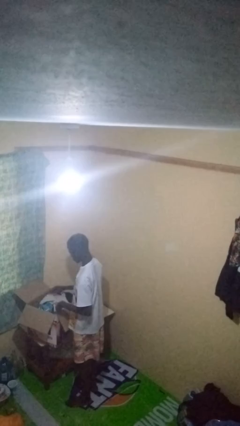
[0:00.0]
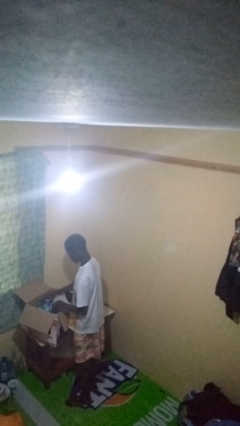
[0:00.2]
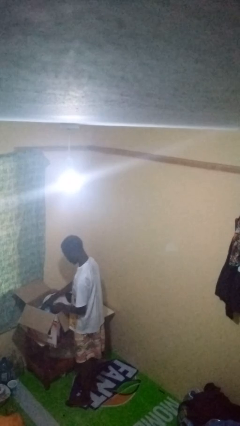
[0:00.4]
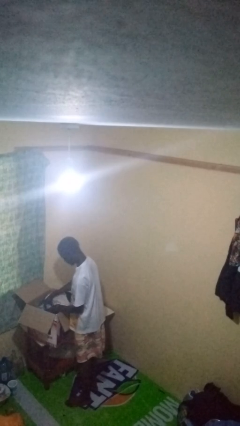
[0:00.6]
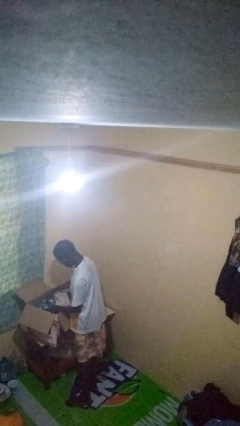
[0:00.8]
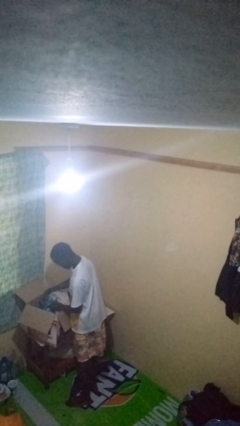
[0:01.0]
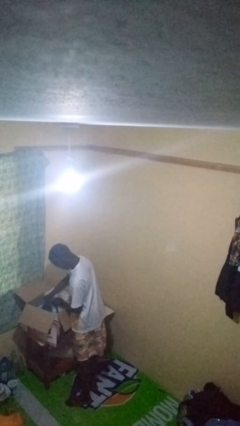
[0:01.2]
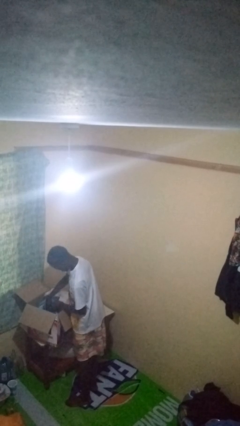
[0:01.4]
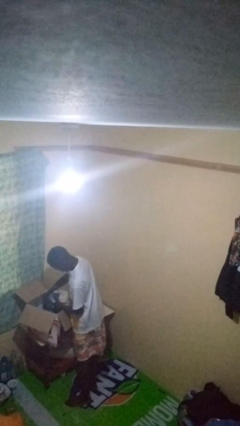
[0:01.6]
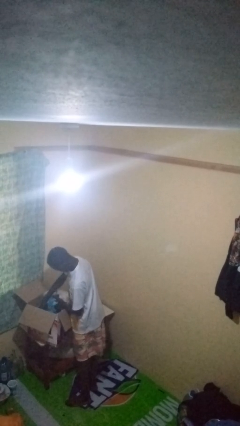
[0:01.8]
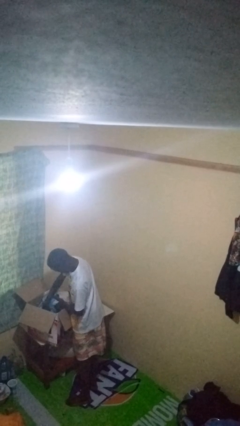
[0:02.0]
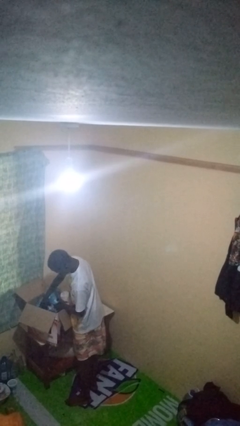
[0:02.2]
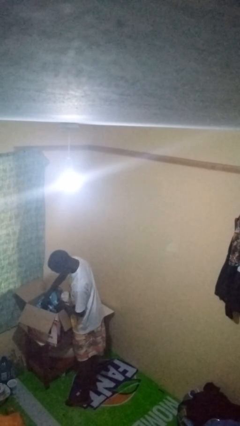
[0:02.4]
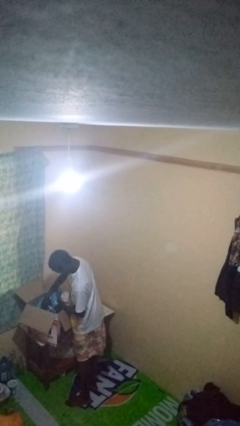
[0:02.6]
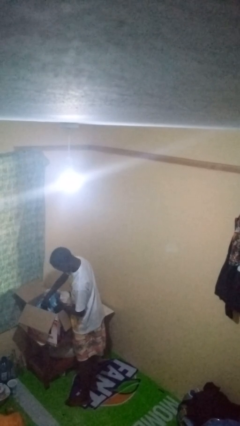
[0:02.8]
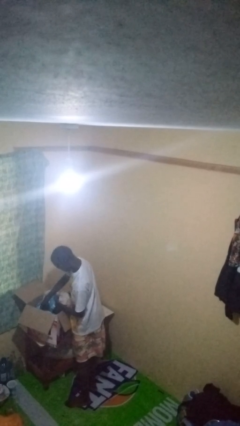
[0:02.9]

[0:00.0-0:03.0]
person searches in box

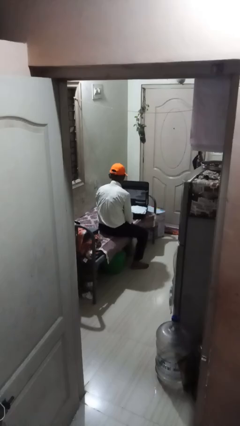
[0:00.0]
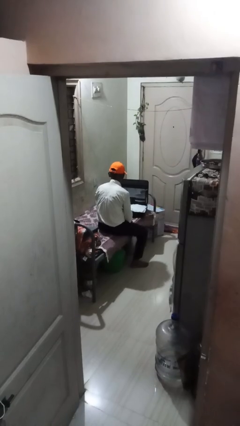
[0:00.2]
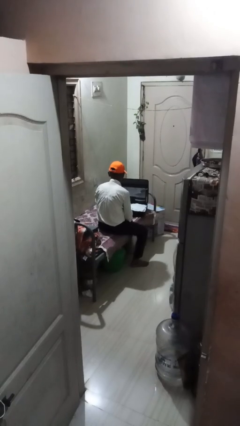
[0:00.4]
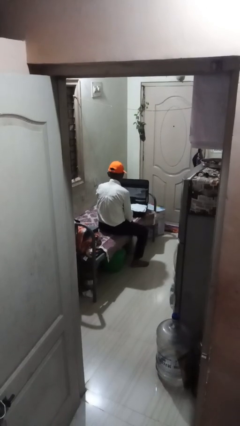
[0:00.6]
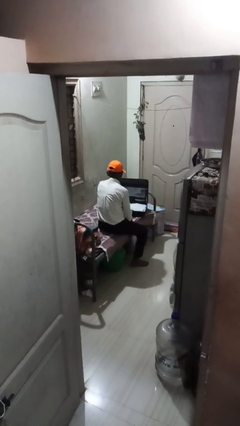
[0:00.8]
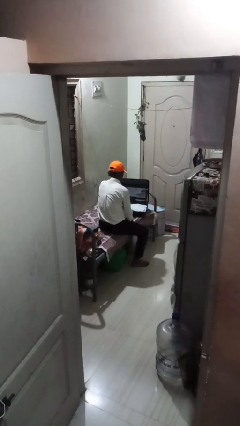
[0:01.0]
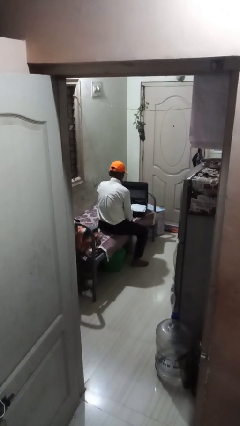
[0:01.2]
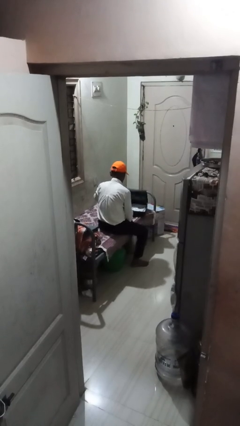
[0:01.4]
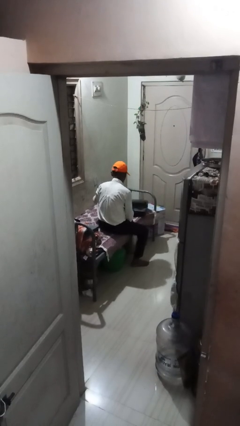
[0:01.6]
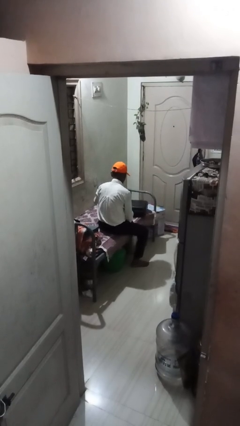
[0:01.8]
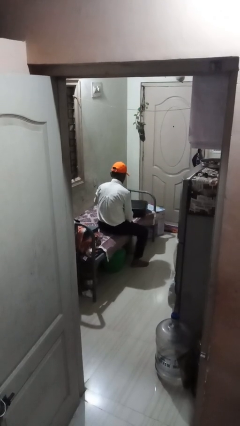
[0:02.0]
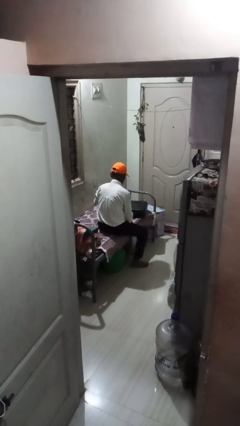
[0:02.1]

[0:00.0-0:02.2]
person closes suitcase

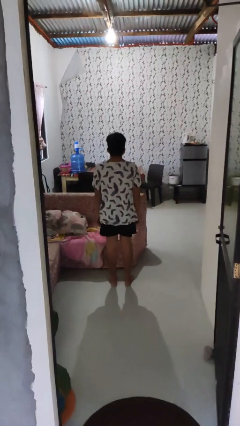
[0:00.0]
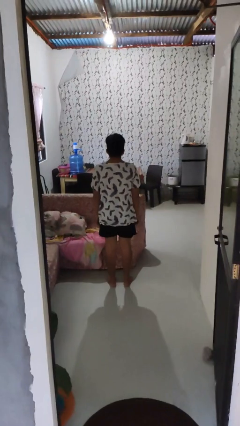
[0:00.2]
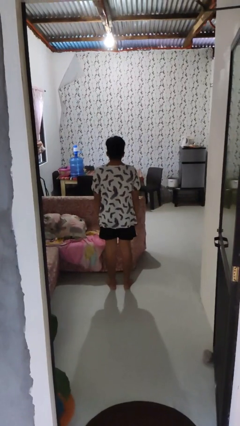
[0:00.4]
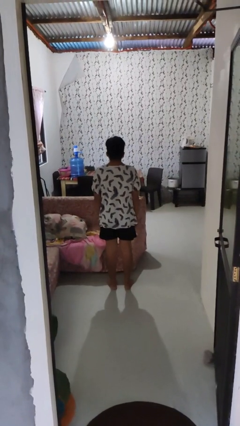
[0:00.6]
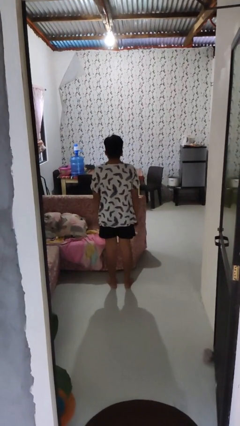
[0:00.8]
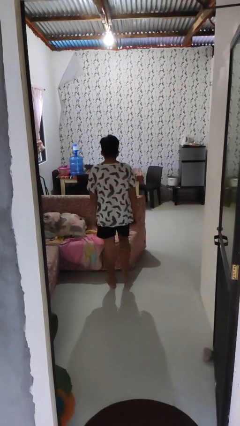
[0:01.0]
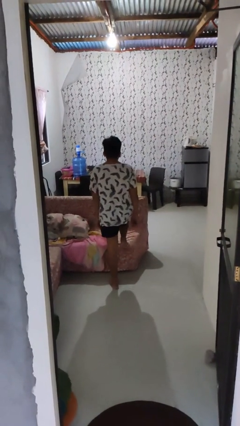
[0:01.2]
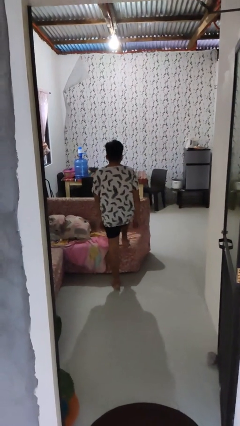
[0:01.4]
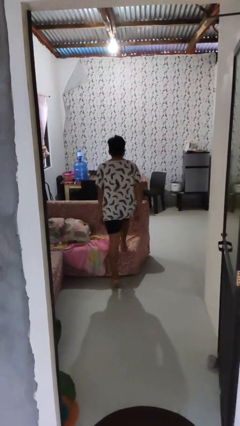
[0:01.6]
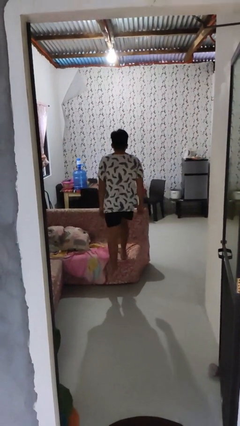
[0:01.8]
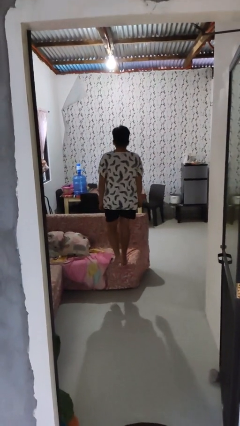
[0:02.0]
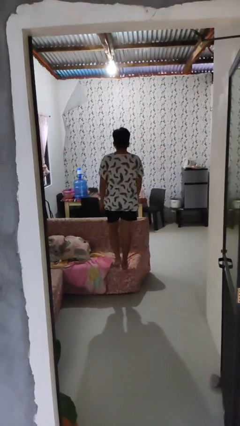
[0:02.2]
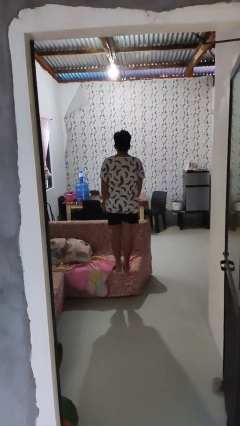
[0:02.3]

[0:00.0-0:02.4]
person climbs on couch

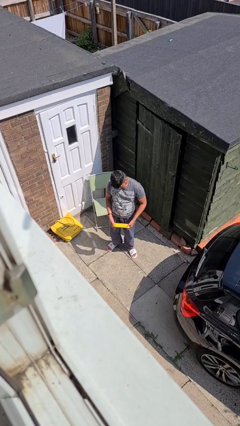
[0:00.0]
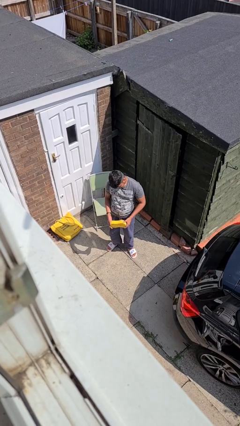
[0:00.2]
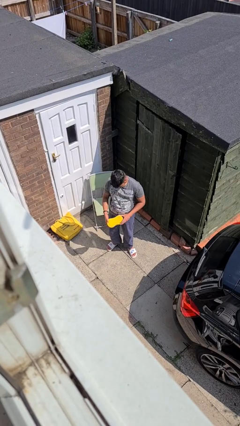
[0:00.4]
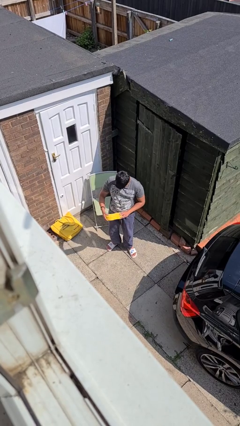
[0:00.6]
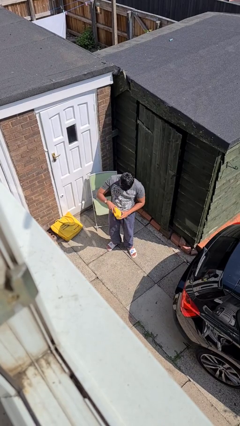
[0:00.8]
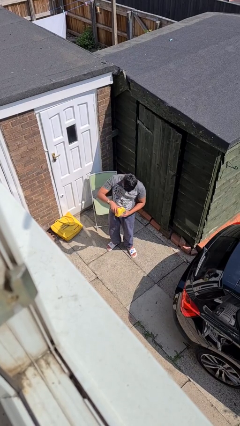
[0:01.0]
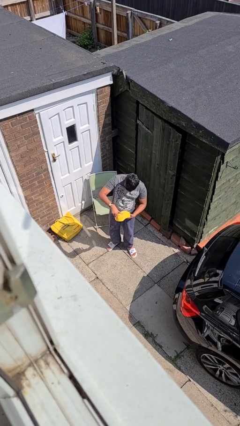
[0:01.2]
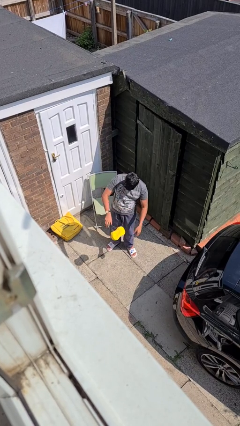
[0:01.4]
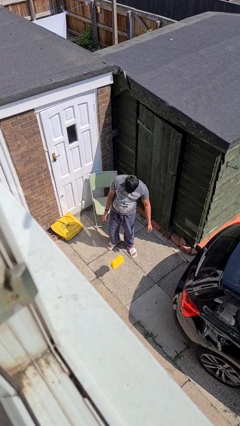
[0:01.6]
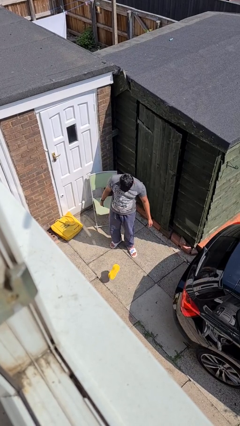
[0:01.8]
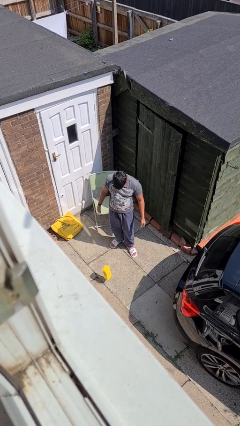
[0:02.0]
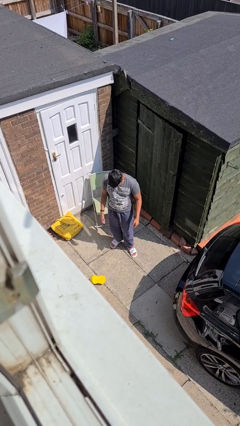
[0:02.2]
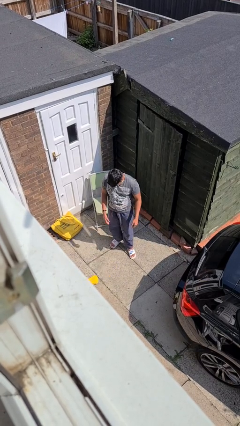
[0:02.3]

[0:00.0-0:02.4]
person drops object

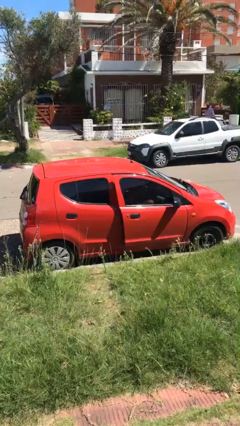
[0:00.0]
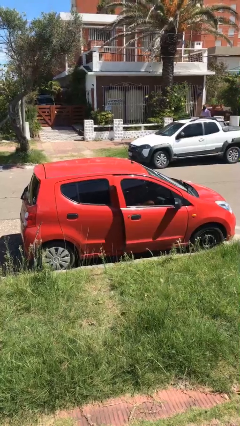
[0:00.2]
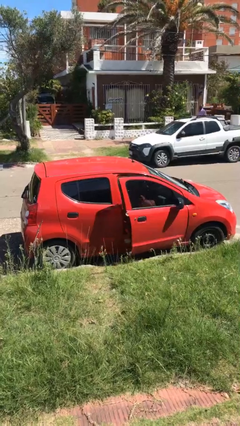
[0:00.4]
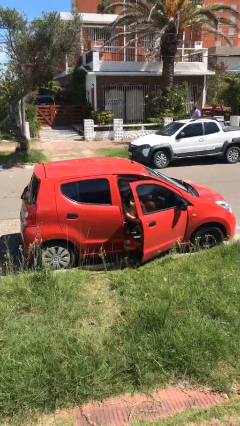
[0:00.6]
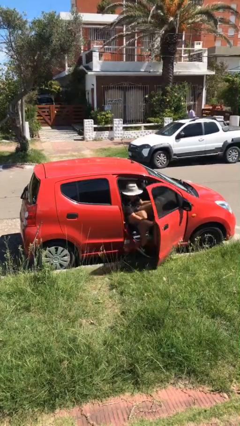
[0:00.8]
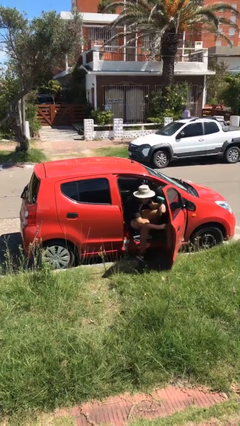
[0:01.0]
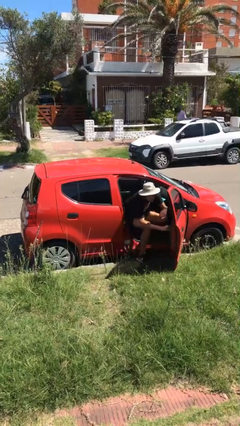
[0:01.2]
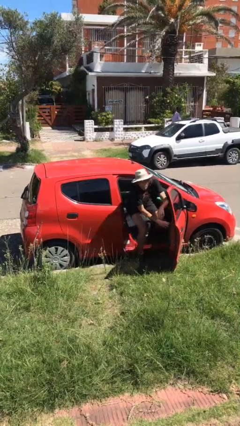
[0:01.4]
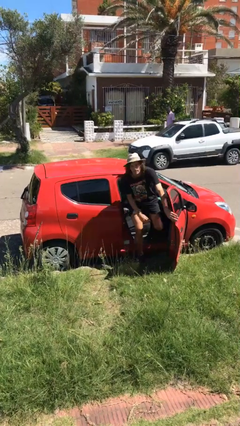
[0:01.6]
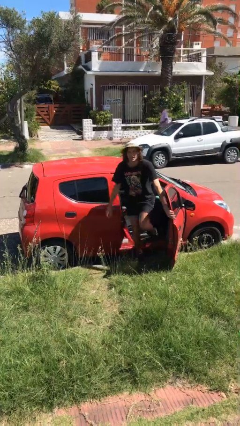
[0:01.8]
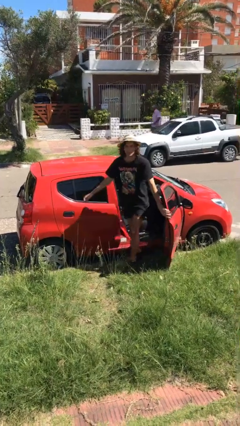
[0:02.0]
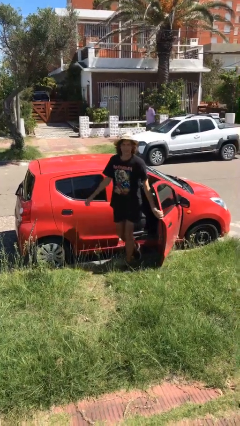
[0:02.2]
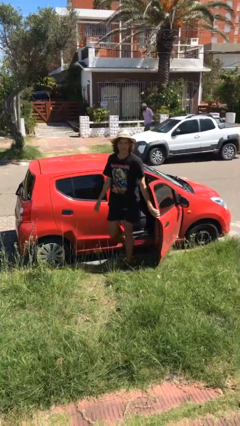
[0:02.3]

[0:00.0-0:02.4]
car drops off person

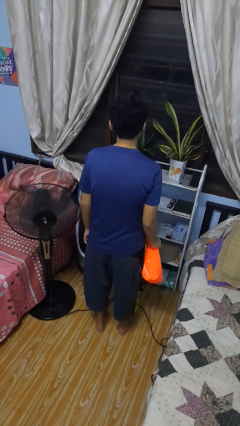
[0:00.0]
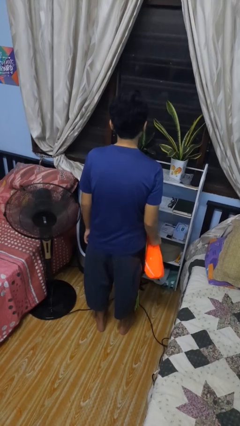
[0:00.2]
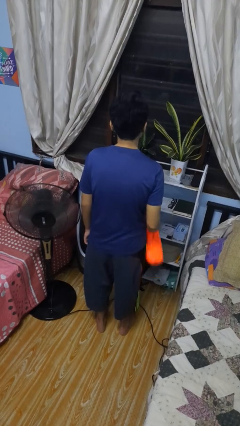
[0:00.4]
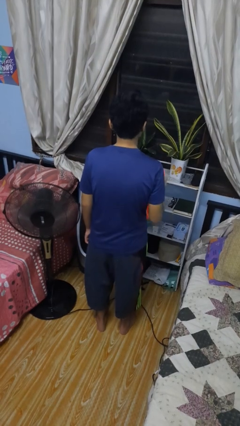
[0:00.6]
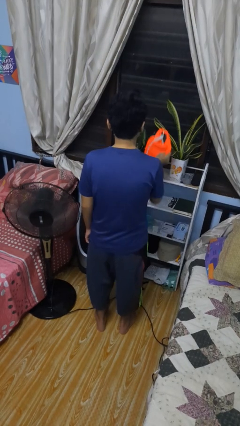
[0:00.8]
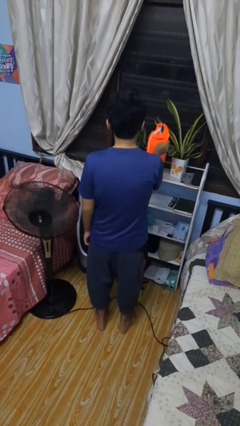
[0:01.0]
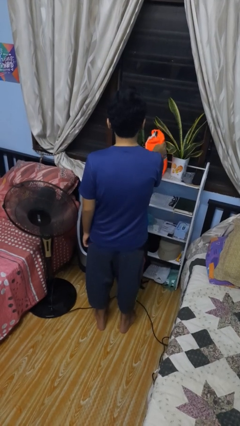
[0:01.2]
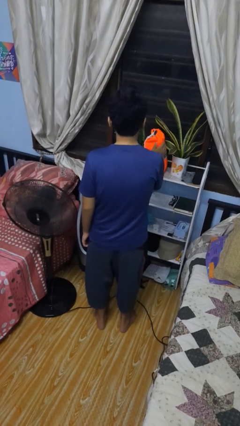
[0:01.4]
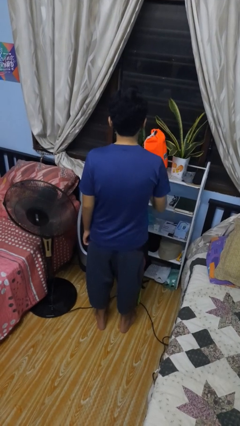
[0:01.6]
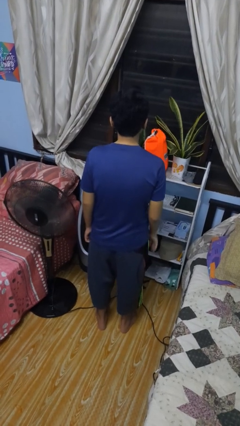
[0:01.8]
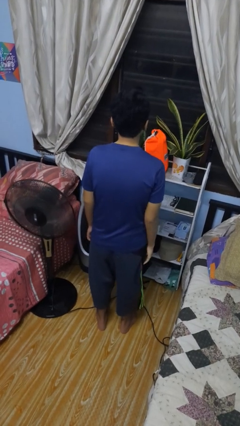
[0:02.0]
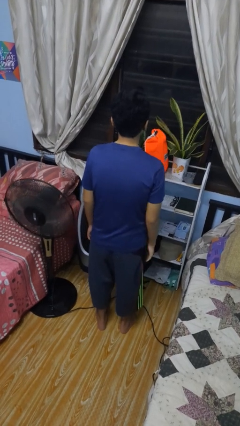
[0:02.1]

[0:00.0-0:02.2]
person puts down object on countertop

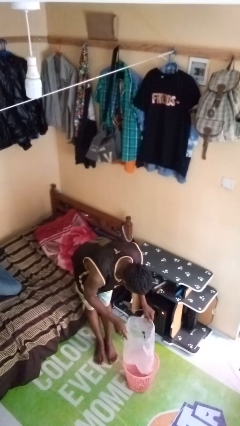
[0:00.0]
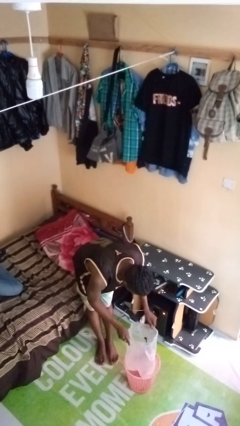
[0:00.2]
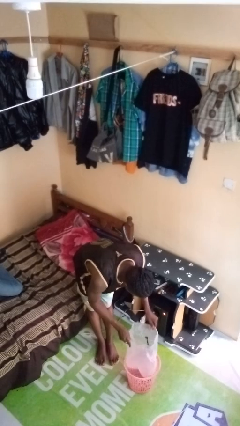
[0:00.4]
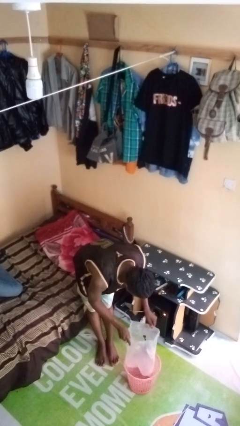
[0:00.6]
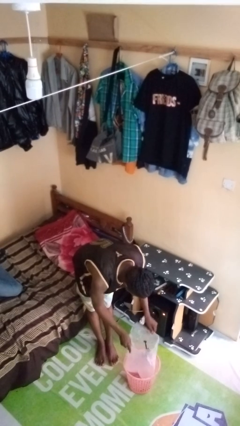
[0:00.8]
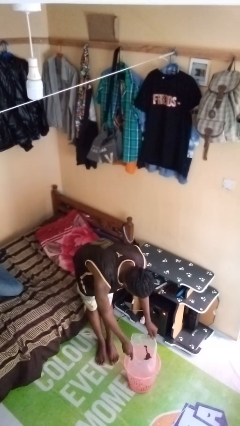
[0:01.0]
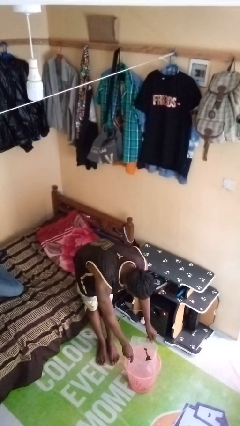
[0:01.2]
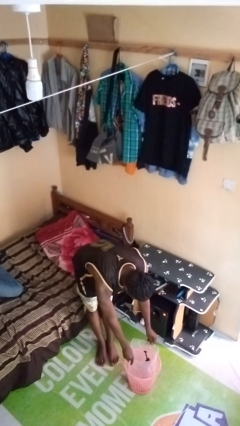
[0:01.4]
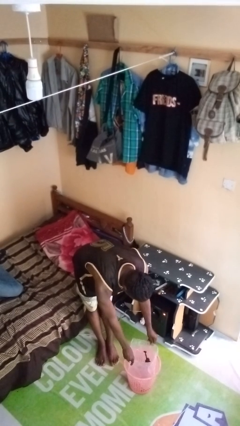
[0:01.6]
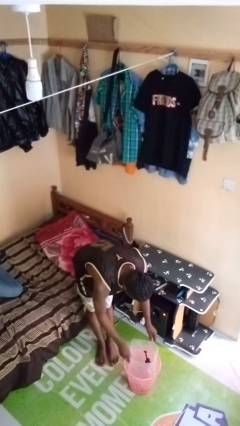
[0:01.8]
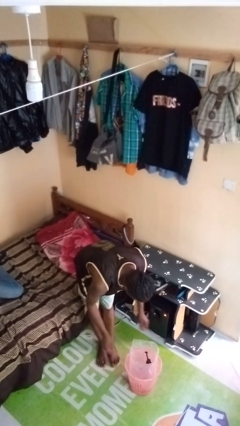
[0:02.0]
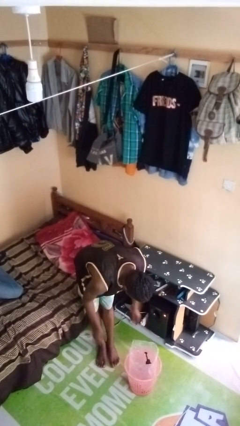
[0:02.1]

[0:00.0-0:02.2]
person inserts trashbag into trashcan
